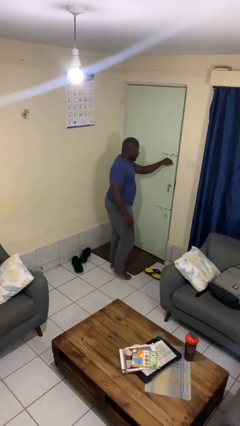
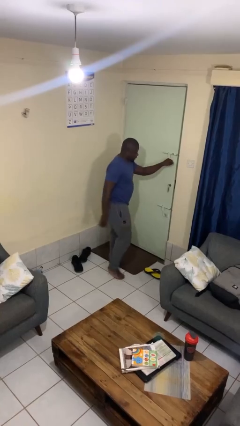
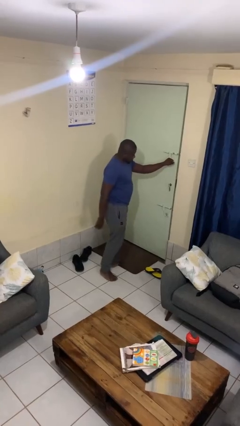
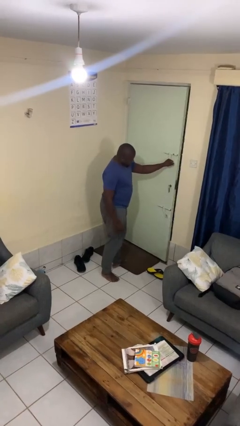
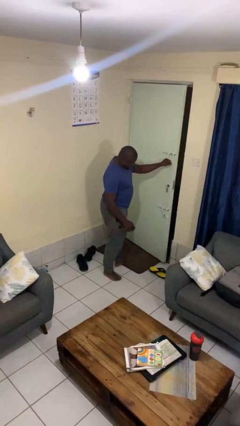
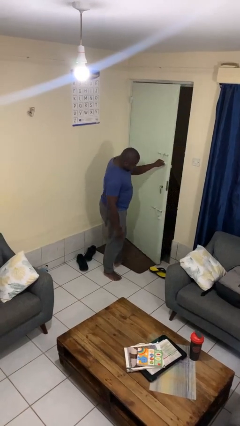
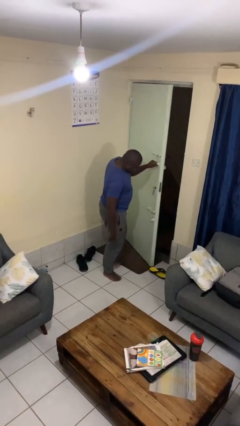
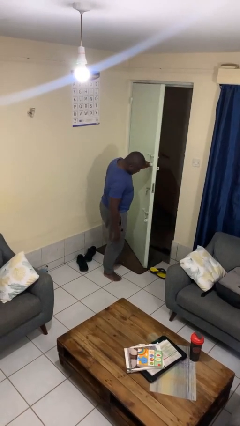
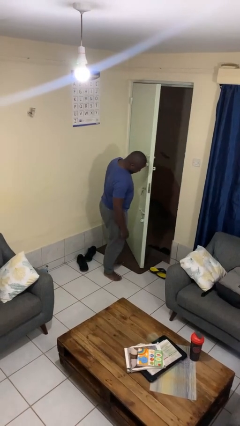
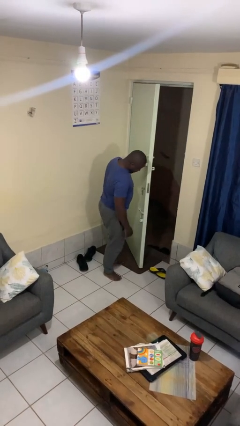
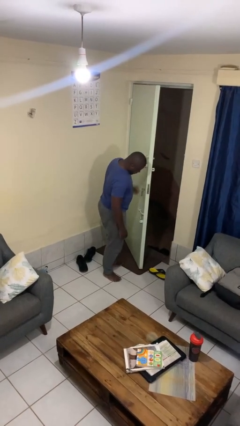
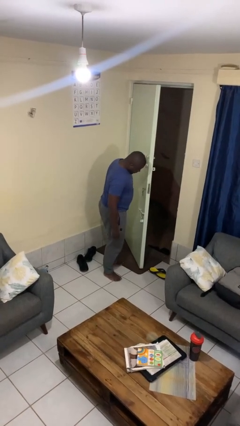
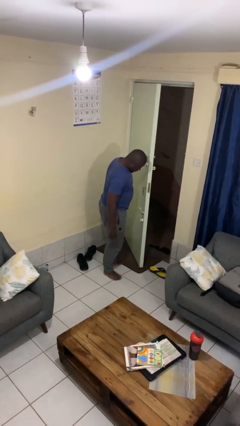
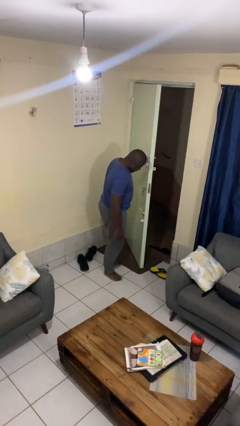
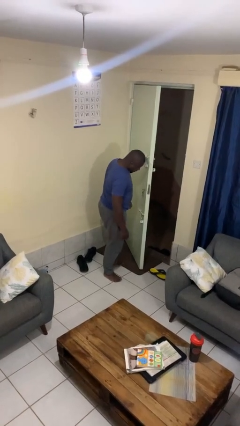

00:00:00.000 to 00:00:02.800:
person opens facility door

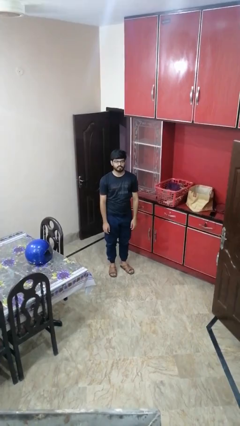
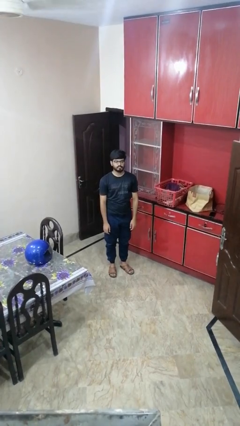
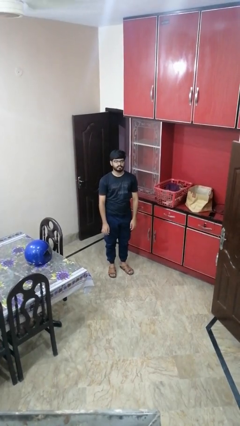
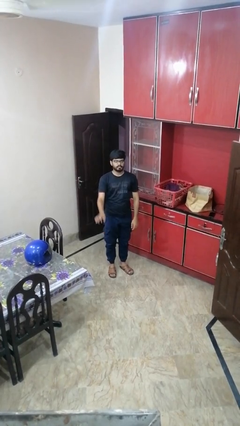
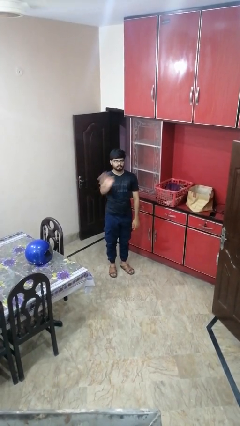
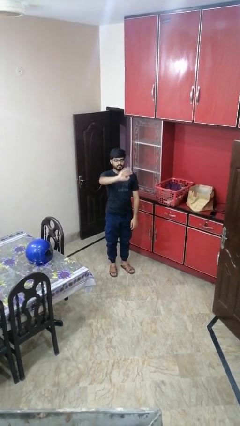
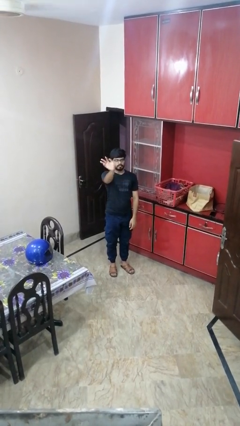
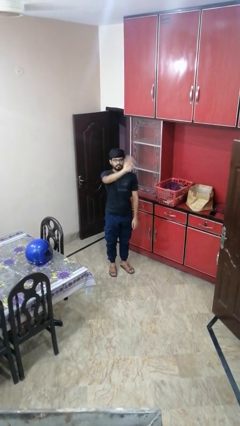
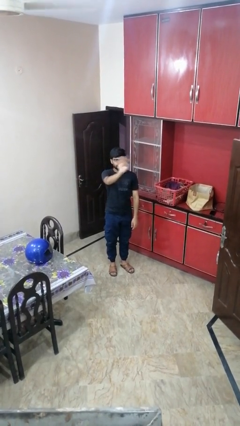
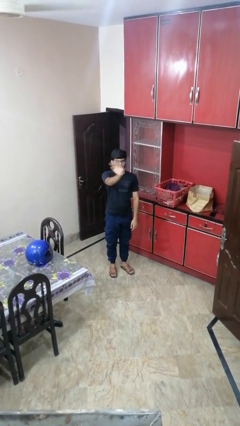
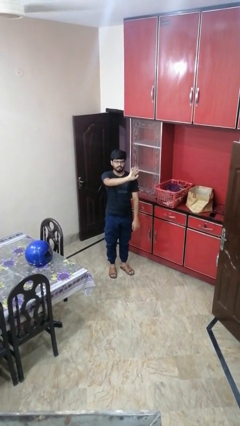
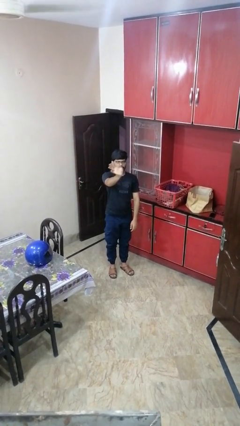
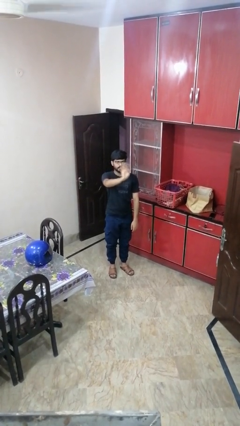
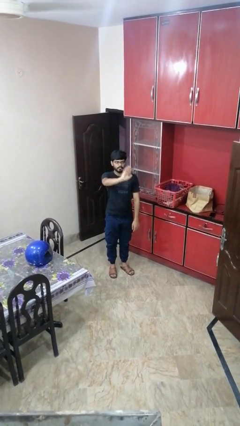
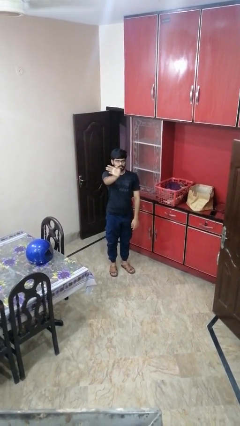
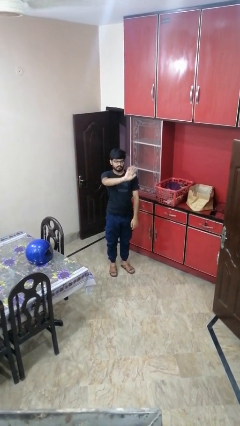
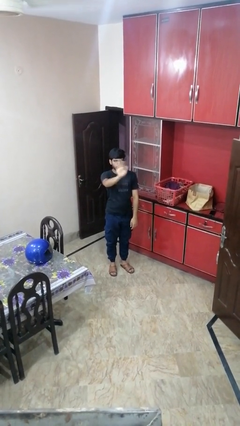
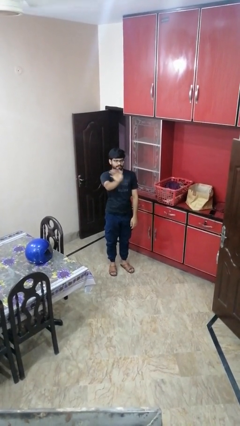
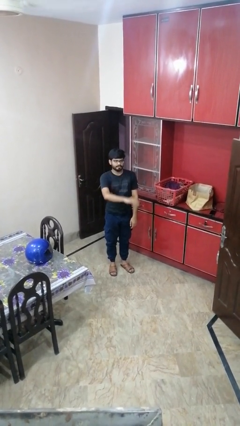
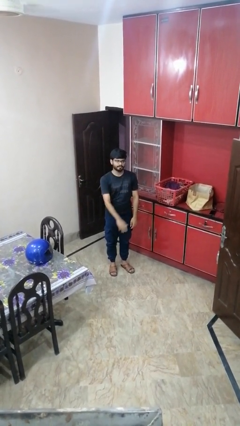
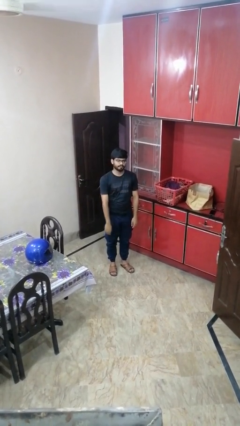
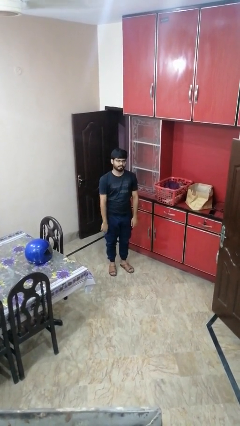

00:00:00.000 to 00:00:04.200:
person waves at person

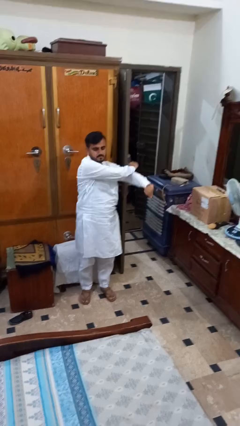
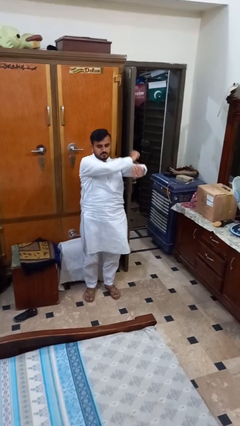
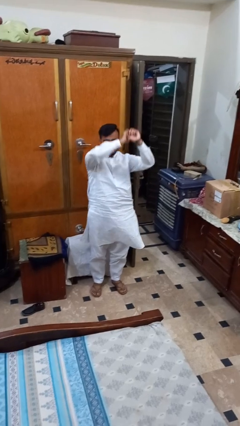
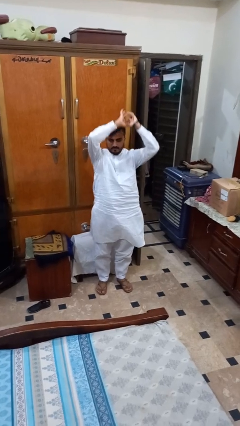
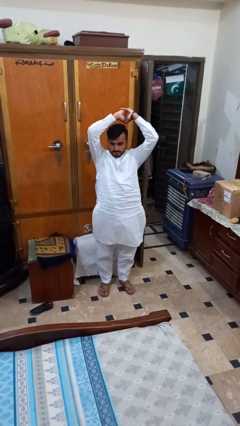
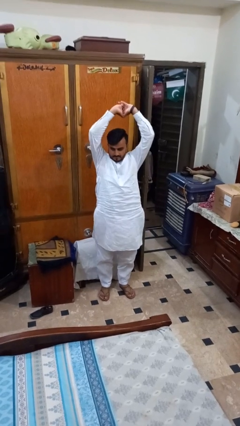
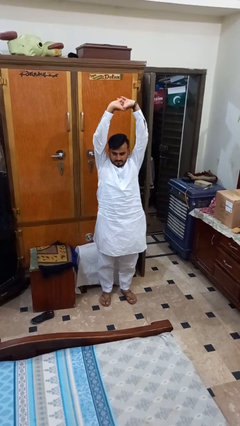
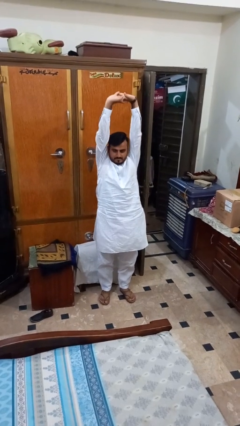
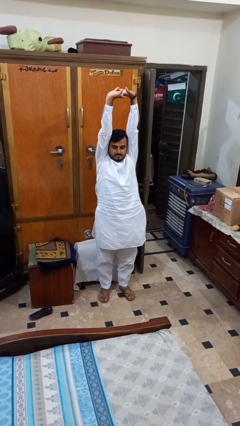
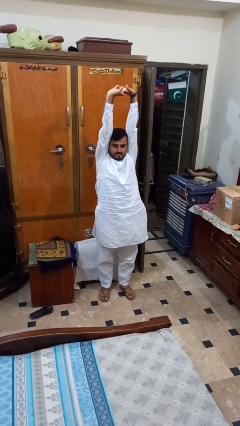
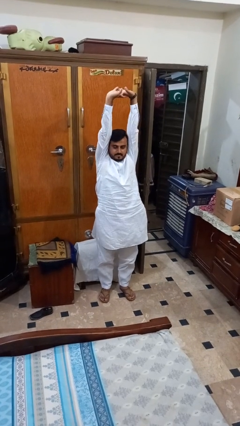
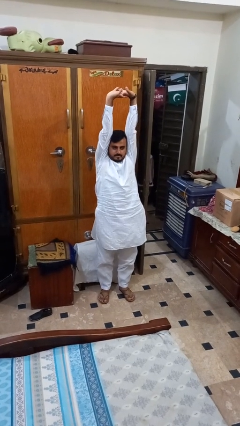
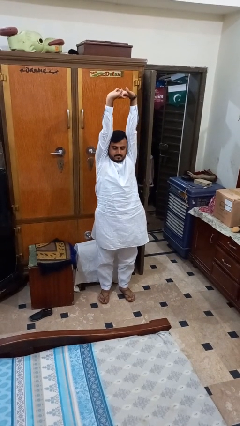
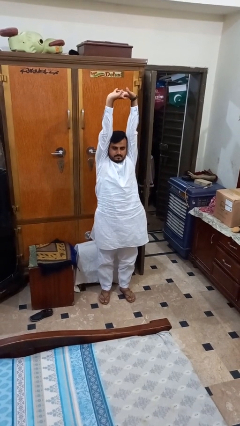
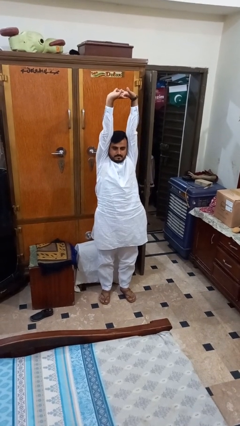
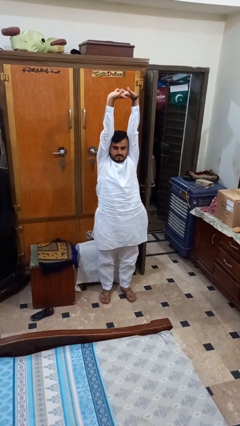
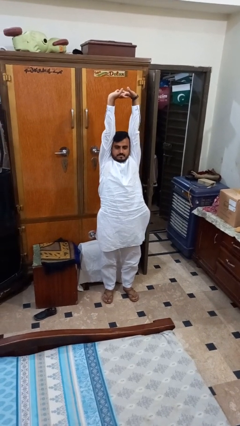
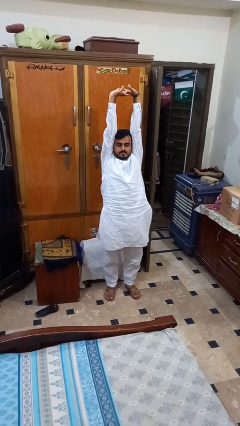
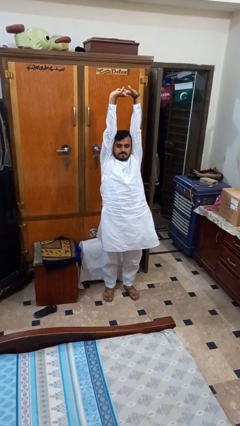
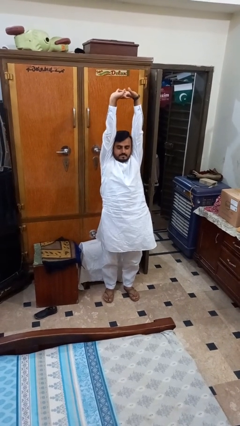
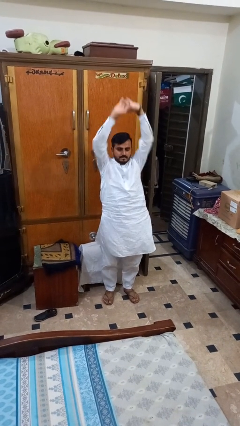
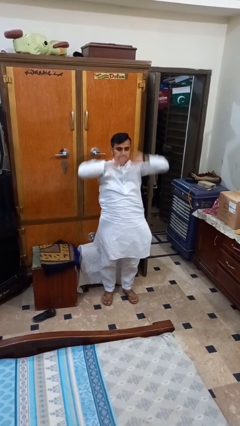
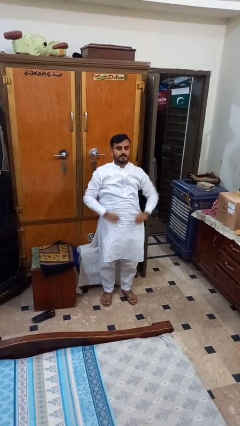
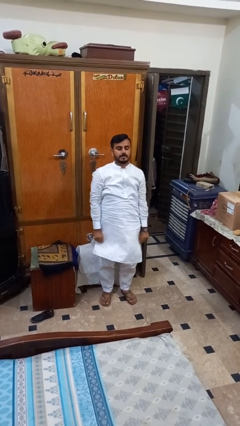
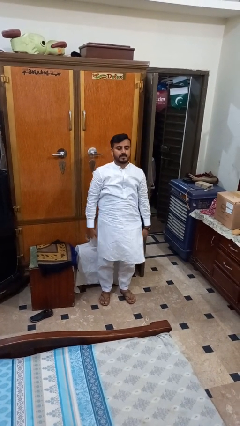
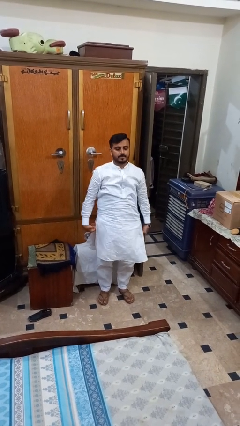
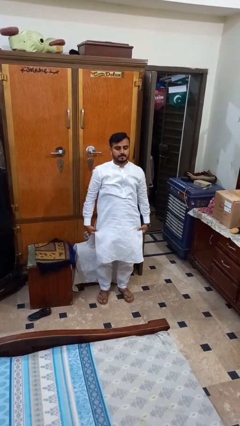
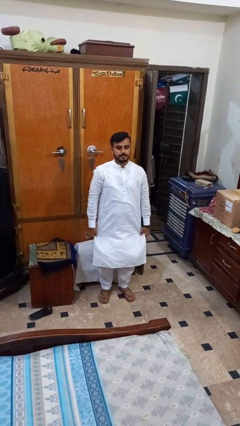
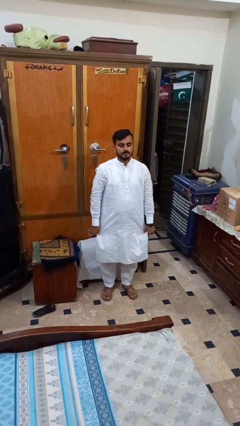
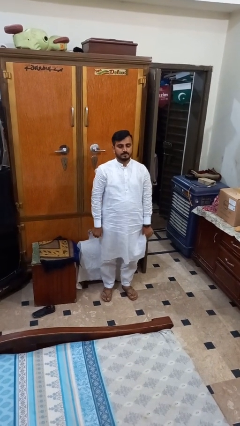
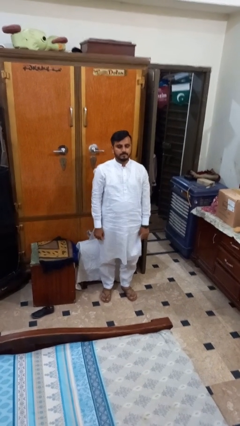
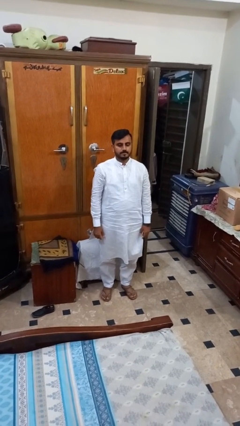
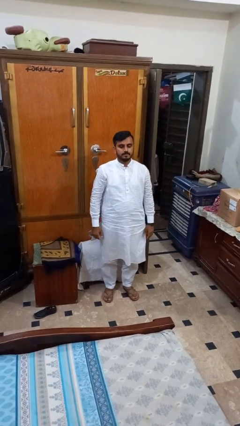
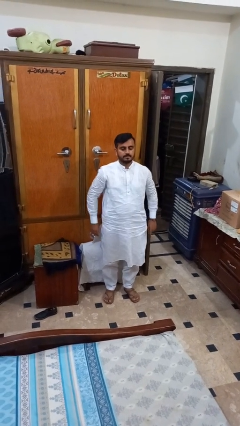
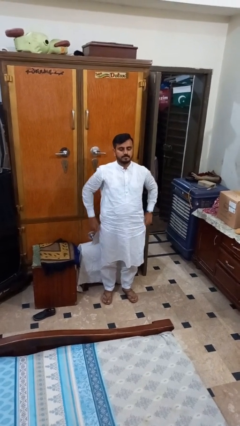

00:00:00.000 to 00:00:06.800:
person stretches arms over head

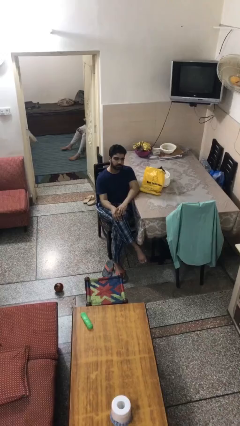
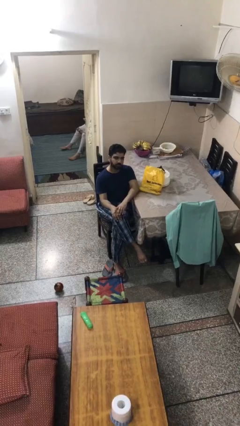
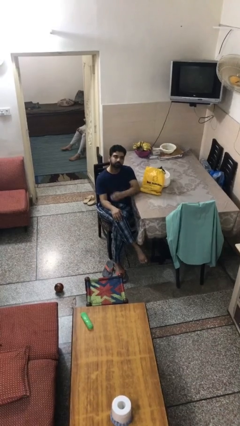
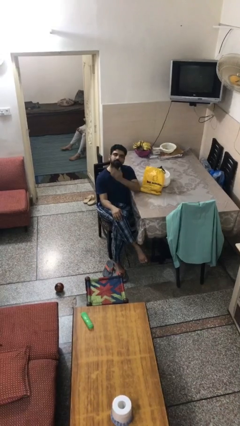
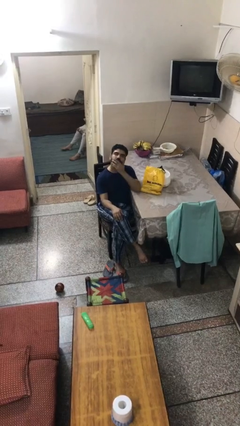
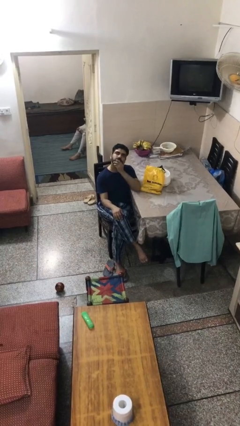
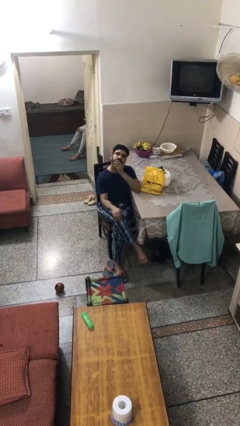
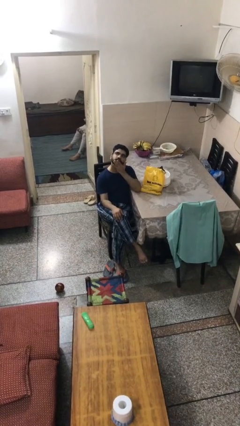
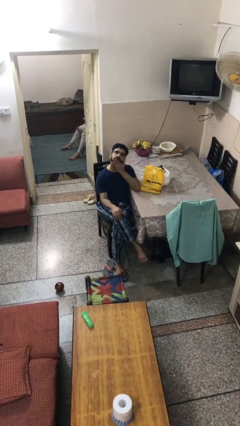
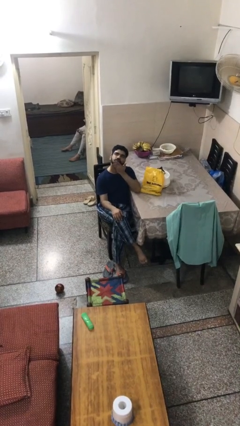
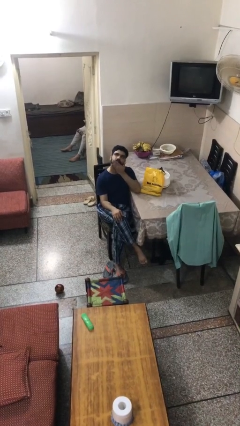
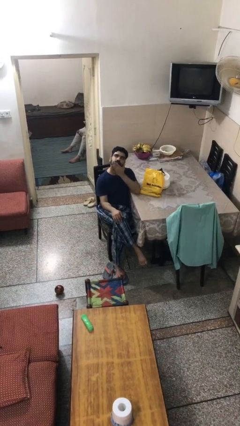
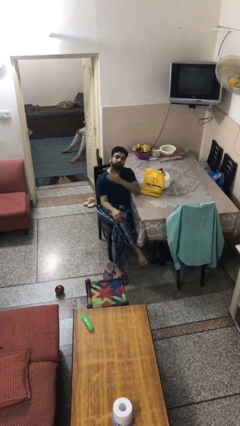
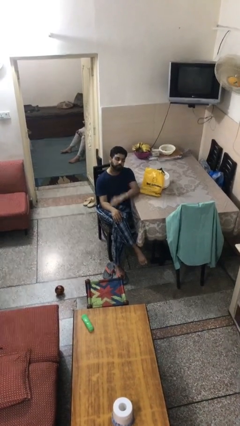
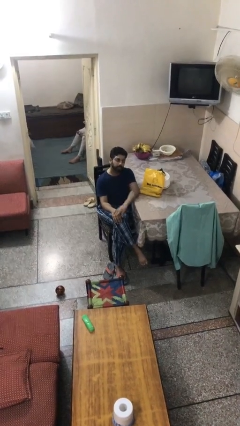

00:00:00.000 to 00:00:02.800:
person strokes chin

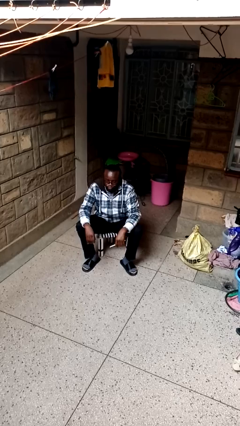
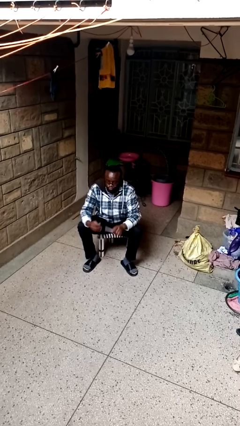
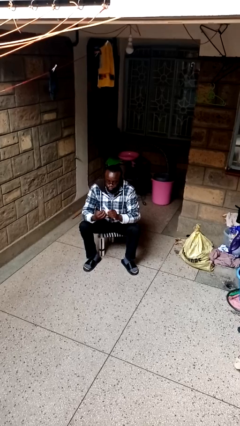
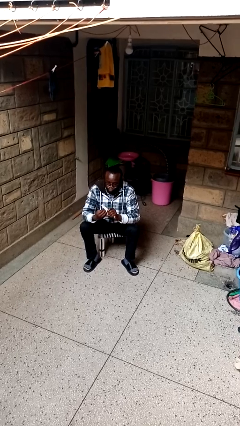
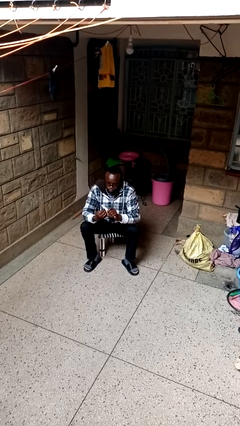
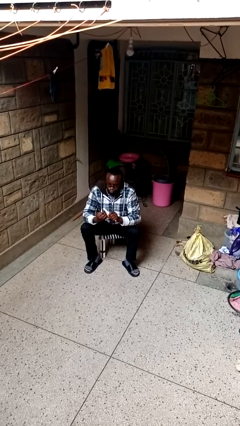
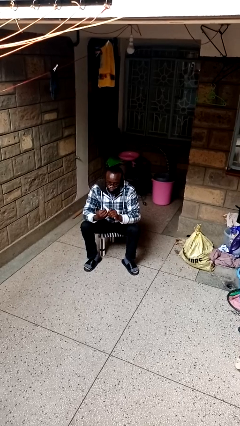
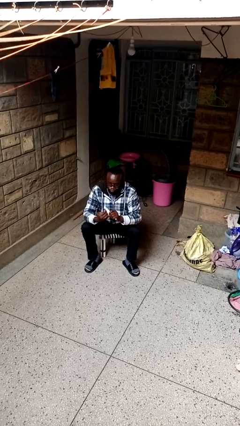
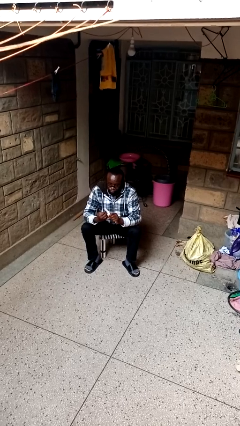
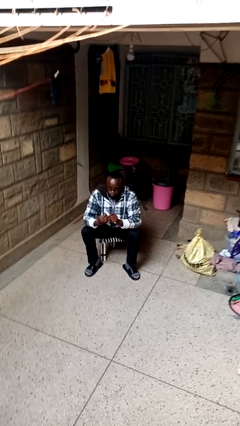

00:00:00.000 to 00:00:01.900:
person files fingernails
